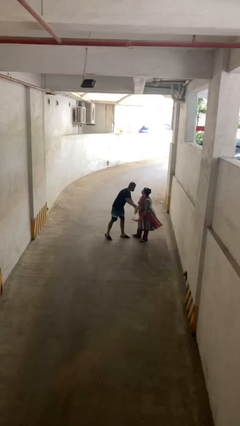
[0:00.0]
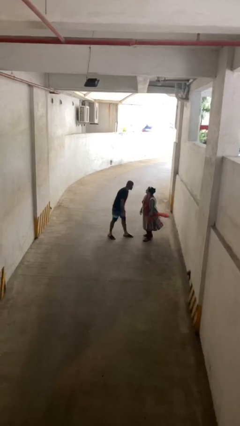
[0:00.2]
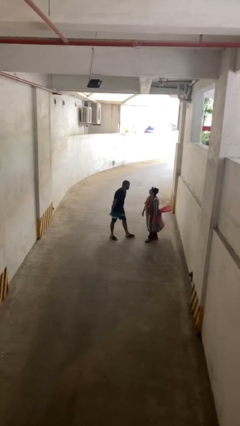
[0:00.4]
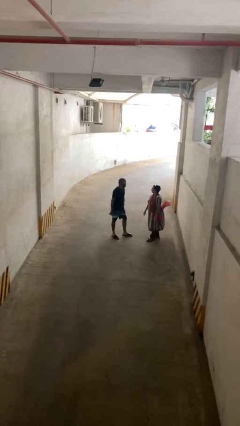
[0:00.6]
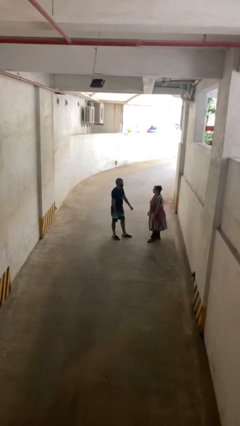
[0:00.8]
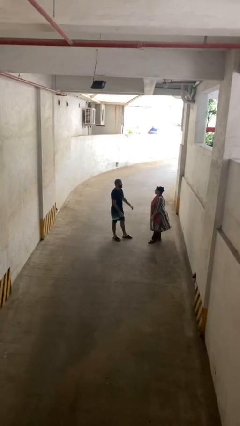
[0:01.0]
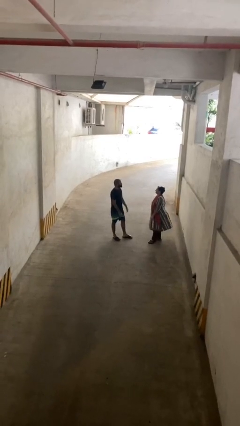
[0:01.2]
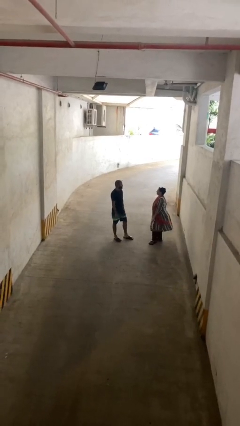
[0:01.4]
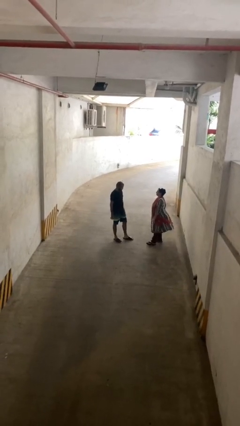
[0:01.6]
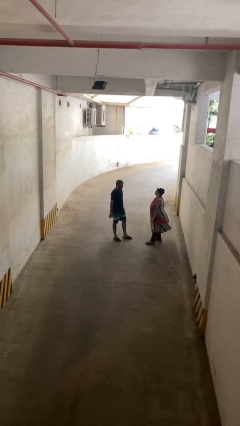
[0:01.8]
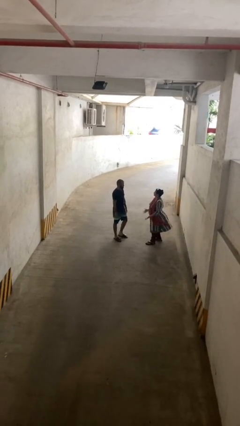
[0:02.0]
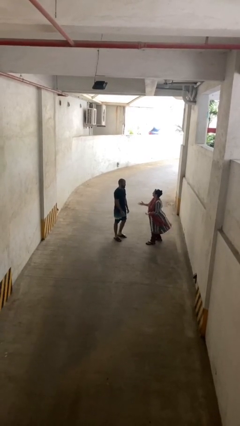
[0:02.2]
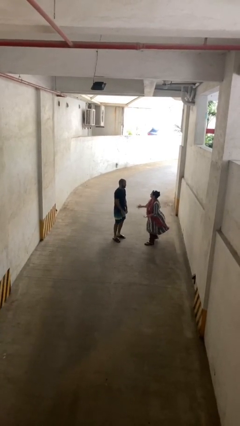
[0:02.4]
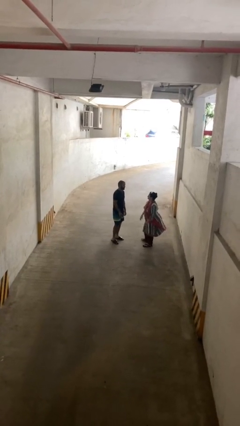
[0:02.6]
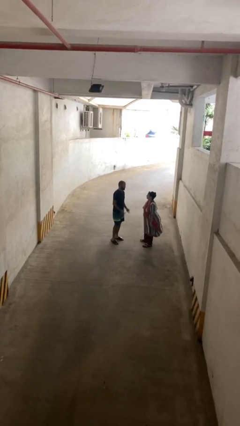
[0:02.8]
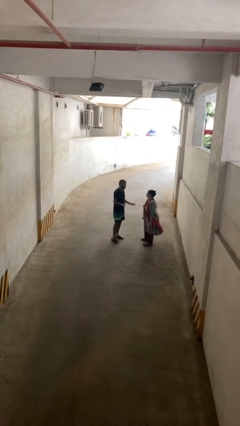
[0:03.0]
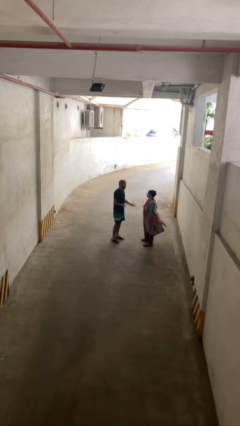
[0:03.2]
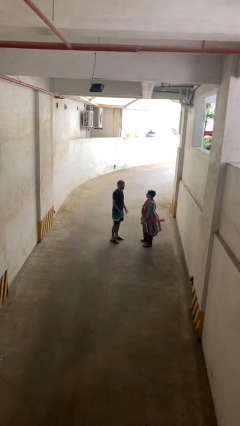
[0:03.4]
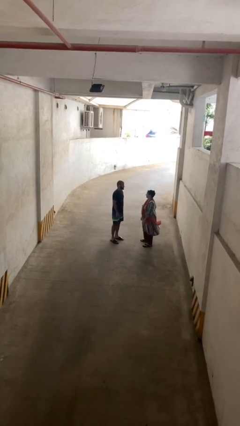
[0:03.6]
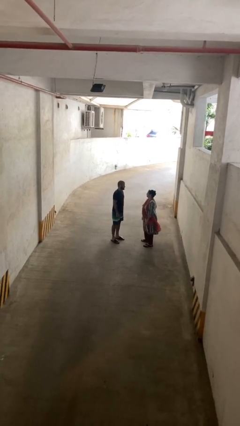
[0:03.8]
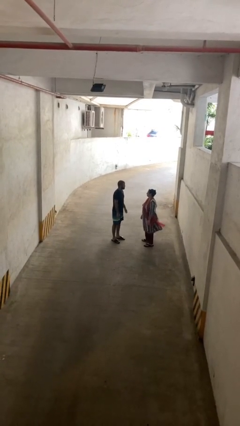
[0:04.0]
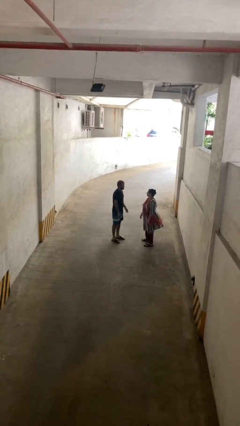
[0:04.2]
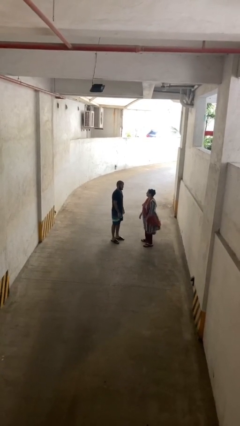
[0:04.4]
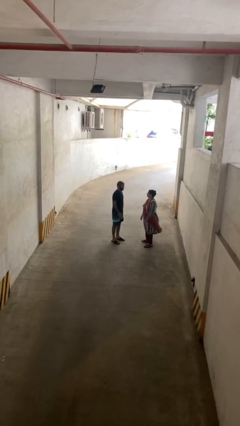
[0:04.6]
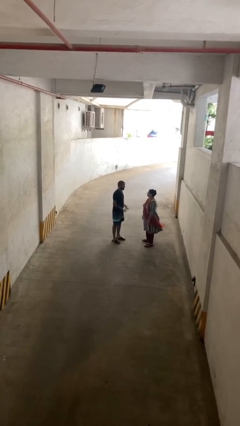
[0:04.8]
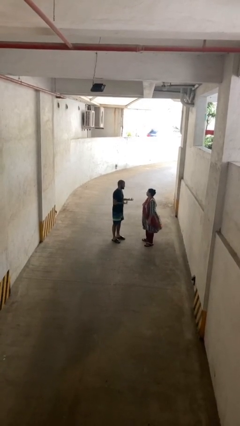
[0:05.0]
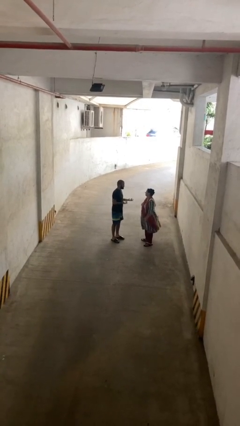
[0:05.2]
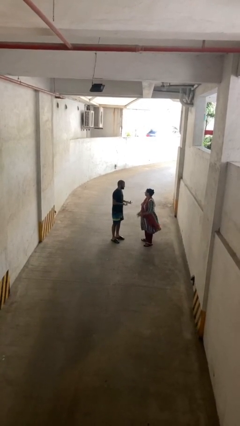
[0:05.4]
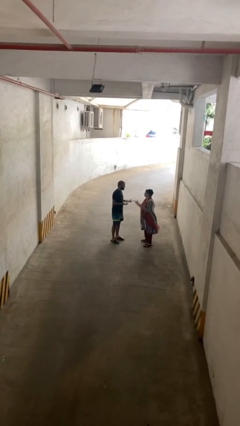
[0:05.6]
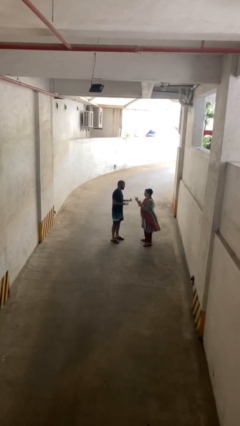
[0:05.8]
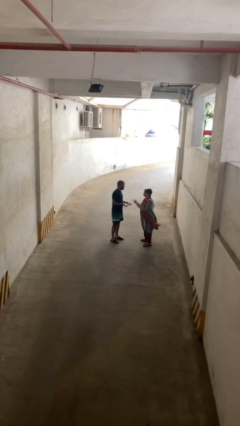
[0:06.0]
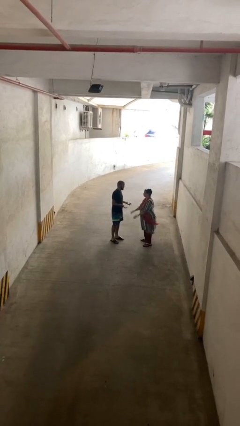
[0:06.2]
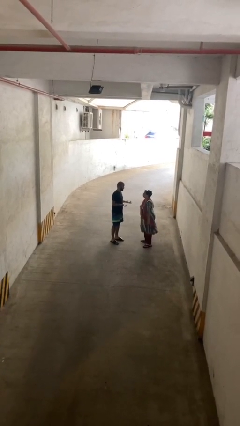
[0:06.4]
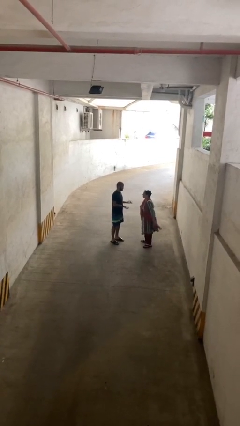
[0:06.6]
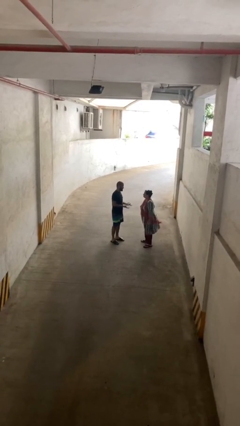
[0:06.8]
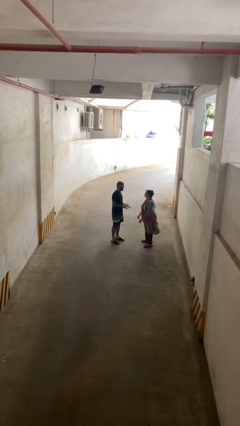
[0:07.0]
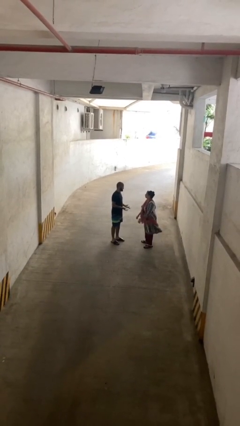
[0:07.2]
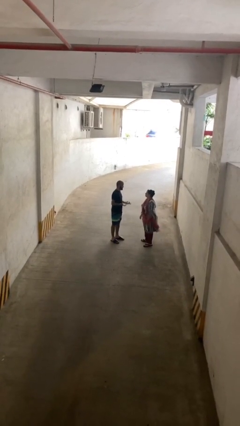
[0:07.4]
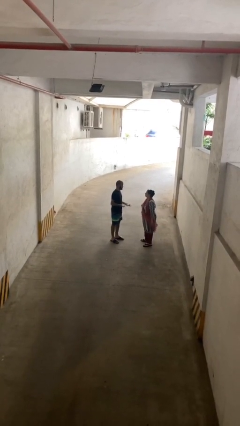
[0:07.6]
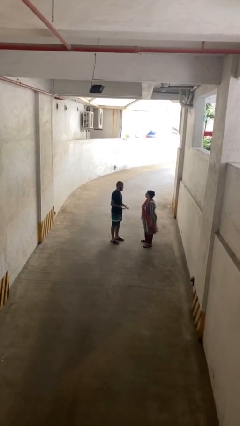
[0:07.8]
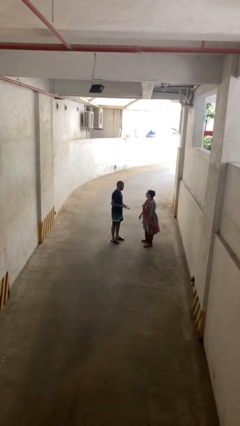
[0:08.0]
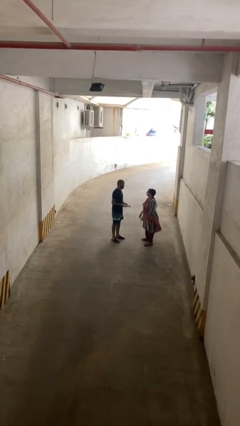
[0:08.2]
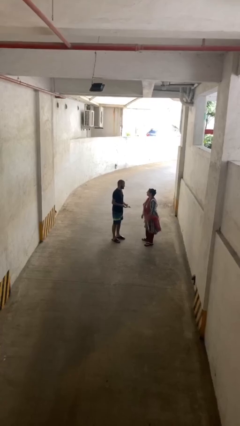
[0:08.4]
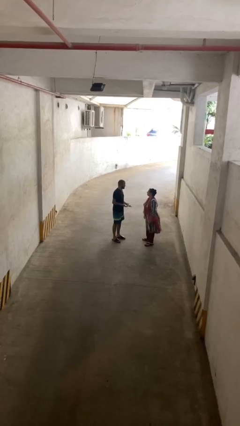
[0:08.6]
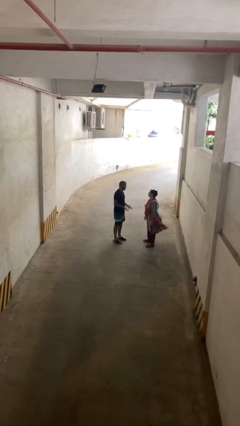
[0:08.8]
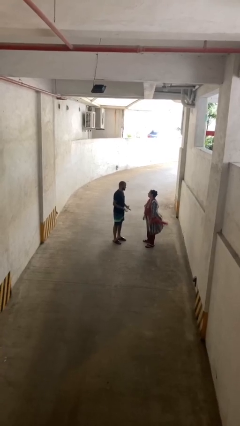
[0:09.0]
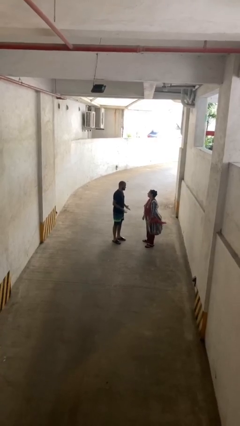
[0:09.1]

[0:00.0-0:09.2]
person talks to person

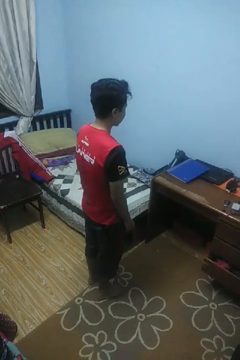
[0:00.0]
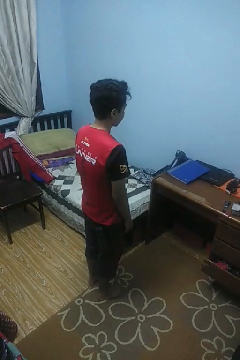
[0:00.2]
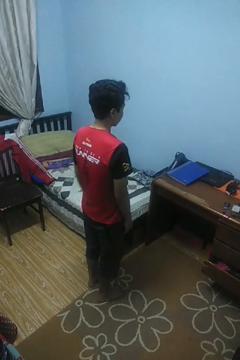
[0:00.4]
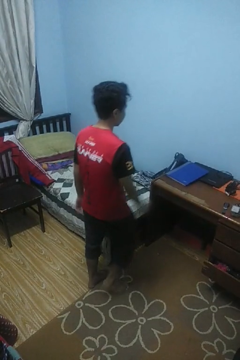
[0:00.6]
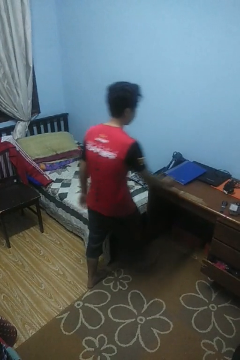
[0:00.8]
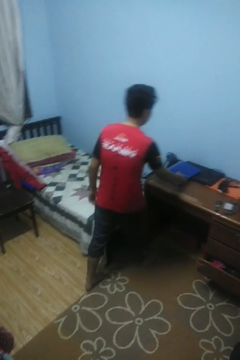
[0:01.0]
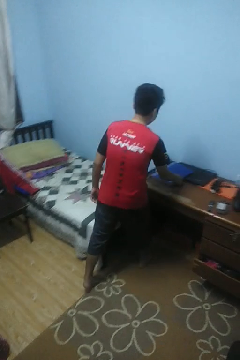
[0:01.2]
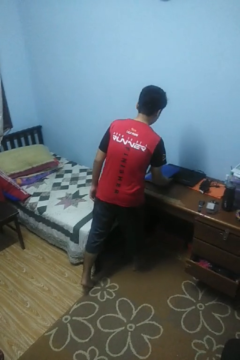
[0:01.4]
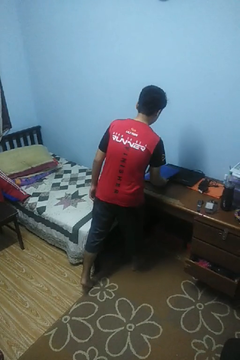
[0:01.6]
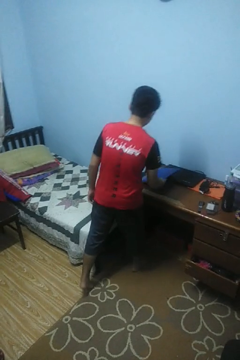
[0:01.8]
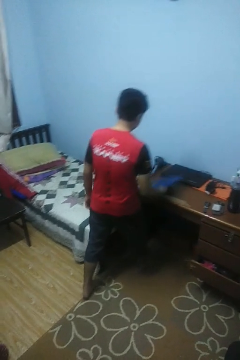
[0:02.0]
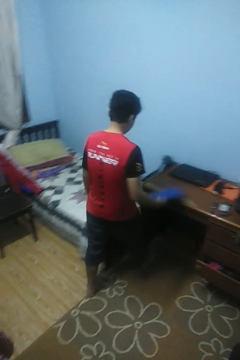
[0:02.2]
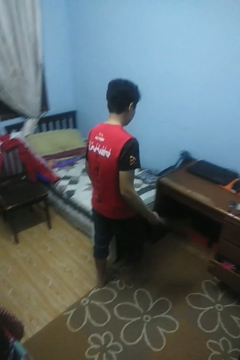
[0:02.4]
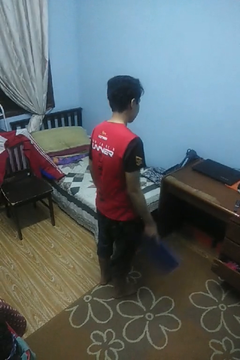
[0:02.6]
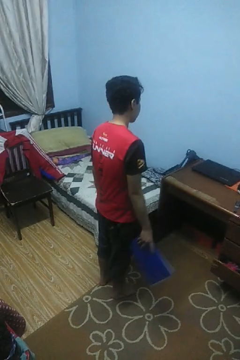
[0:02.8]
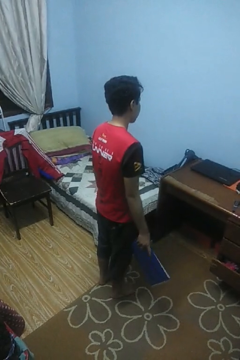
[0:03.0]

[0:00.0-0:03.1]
person picks up object from table

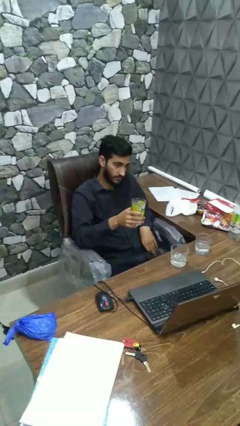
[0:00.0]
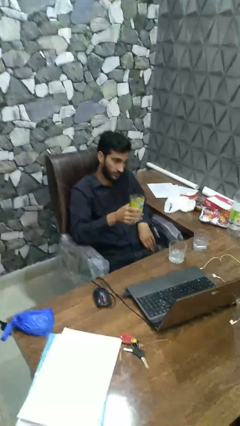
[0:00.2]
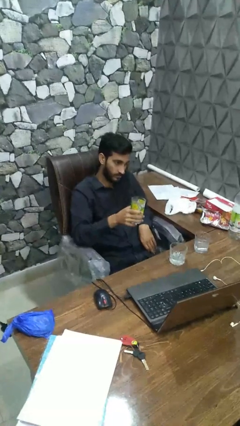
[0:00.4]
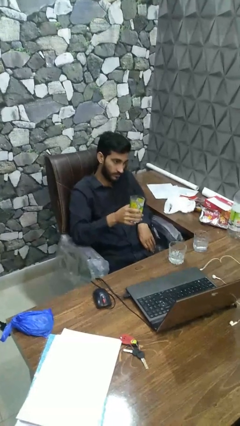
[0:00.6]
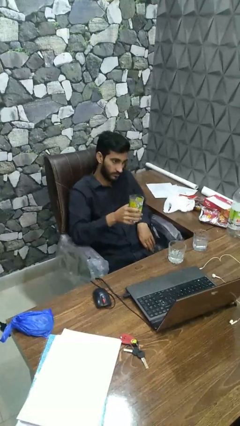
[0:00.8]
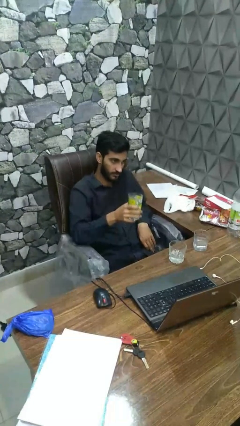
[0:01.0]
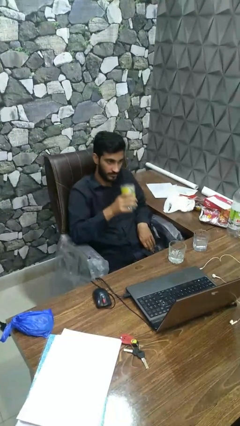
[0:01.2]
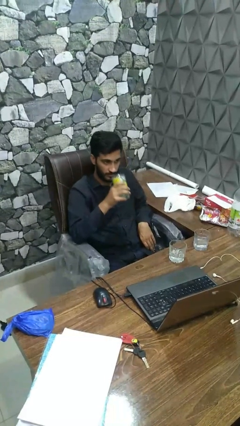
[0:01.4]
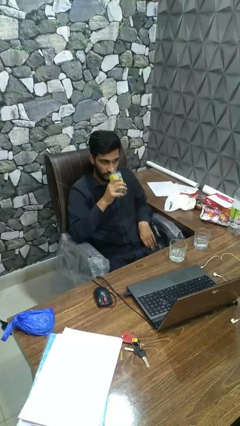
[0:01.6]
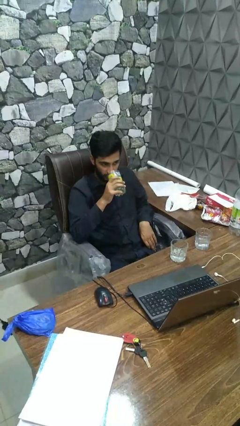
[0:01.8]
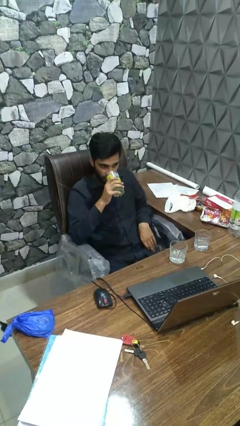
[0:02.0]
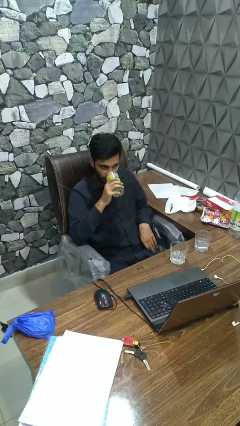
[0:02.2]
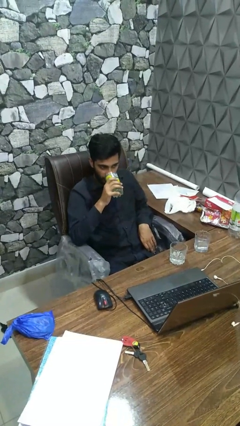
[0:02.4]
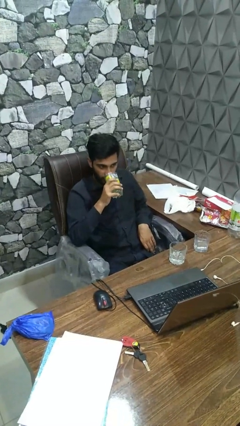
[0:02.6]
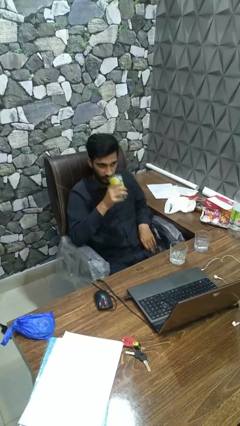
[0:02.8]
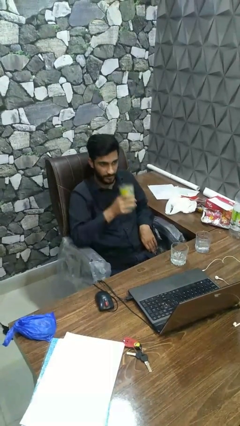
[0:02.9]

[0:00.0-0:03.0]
person drinks from shotglass

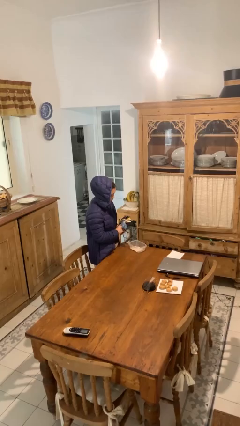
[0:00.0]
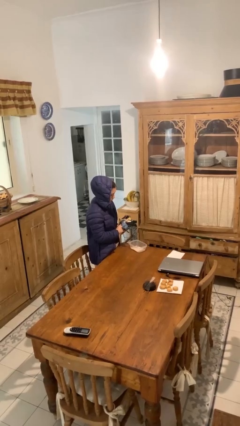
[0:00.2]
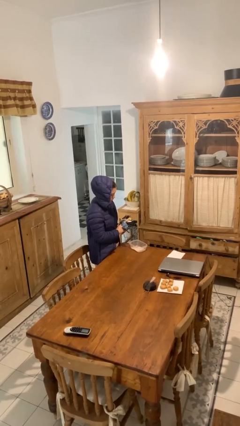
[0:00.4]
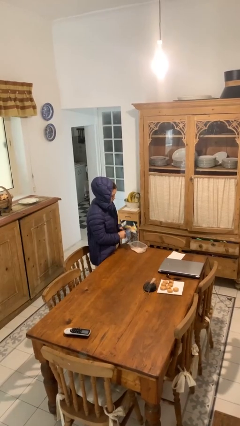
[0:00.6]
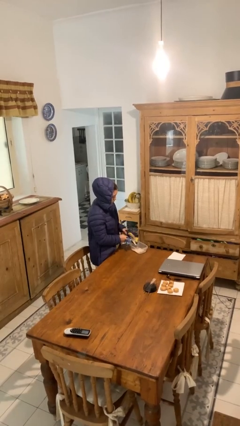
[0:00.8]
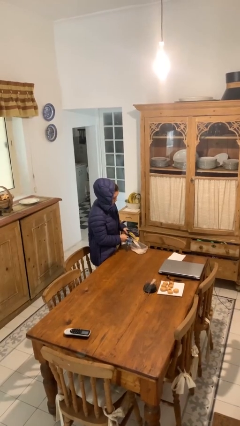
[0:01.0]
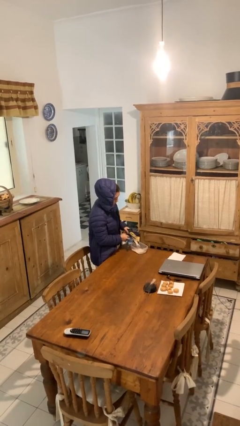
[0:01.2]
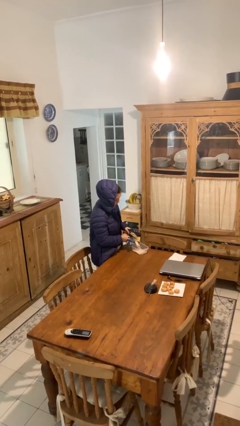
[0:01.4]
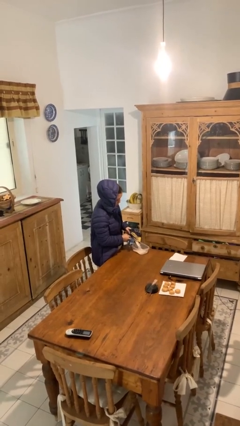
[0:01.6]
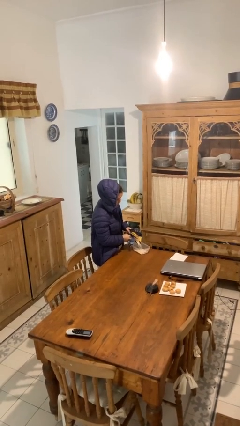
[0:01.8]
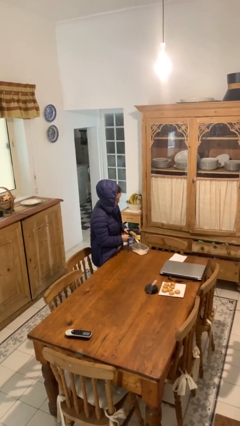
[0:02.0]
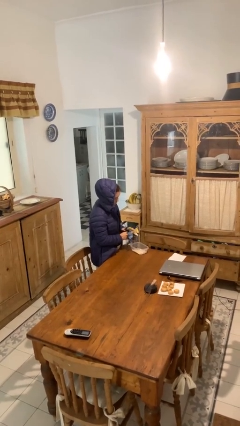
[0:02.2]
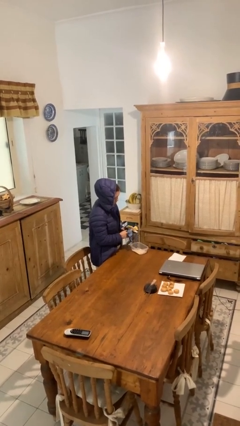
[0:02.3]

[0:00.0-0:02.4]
person pours into bowl

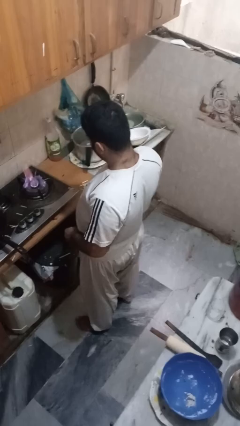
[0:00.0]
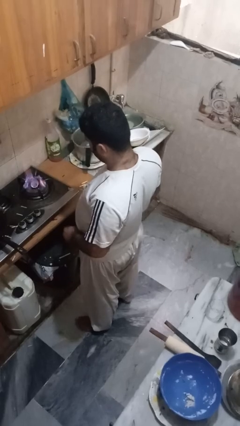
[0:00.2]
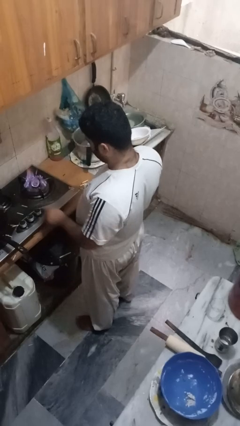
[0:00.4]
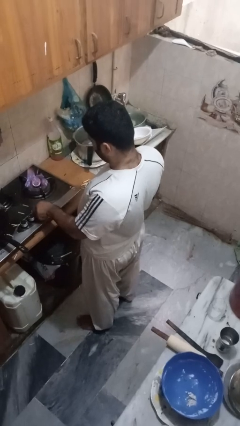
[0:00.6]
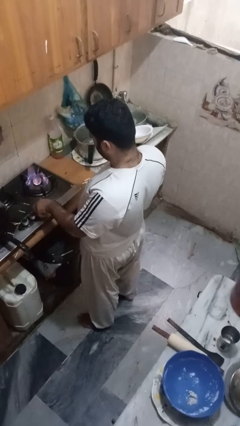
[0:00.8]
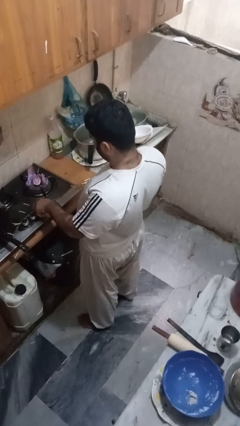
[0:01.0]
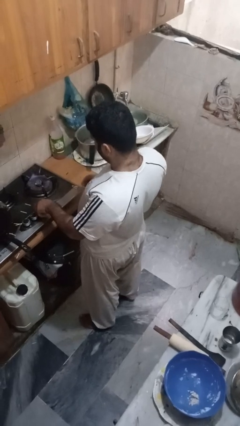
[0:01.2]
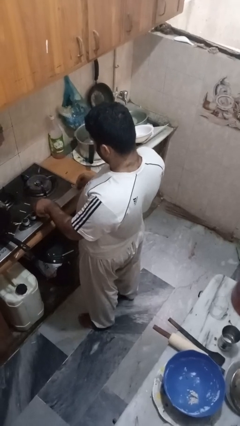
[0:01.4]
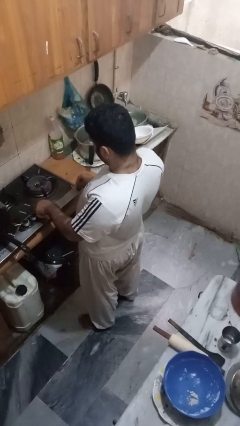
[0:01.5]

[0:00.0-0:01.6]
person turns off stovetop
